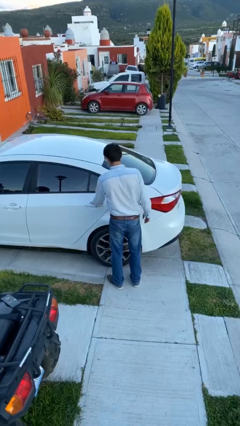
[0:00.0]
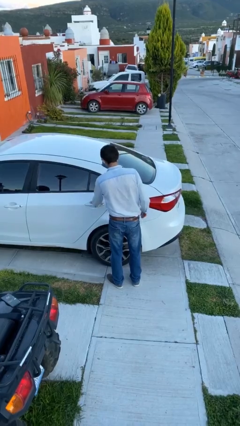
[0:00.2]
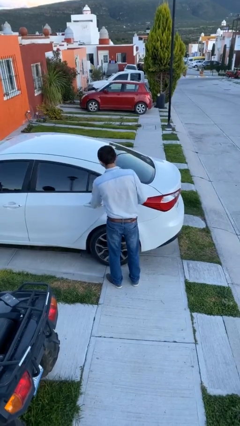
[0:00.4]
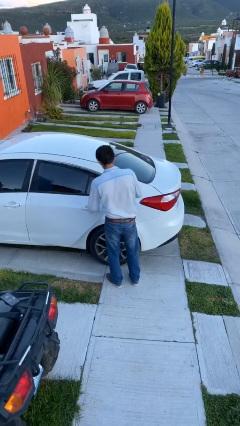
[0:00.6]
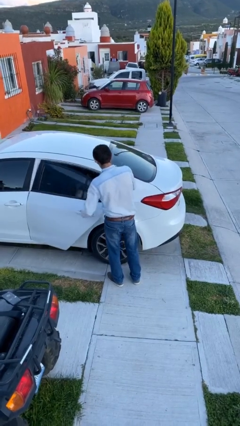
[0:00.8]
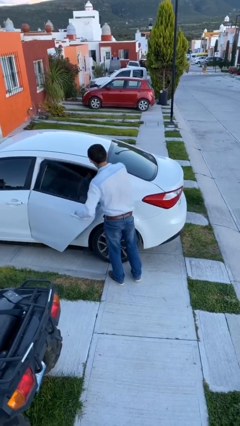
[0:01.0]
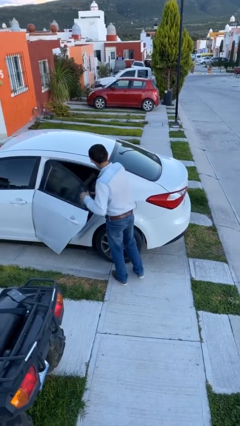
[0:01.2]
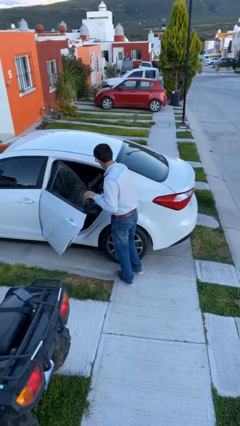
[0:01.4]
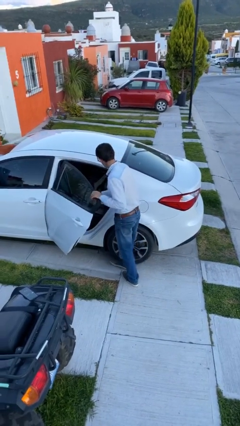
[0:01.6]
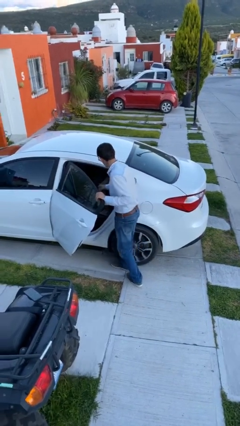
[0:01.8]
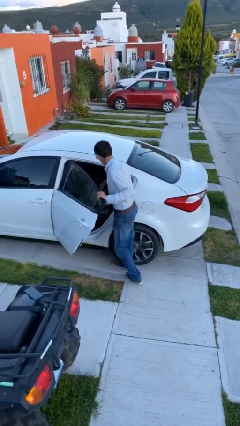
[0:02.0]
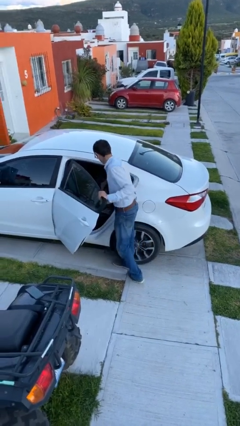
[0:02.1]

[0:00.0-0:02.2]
person opens car door

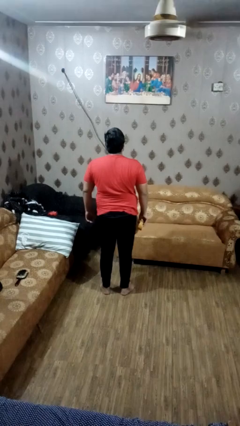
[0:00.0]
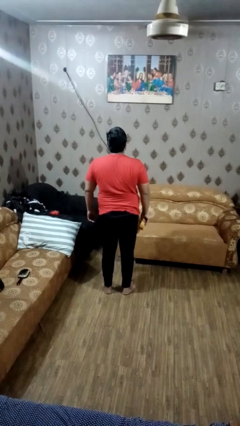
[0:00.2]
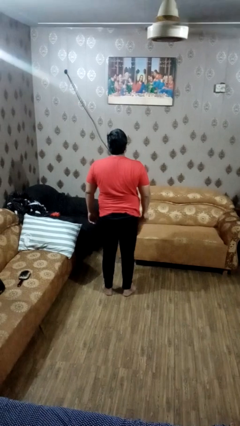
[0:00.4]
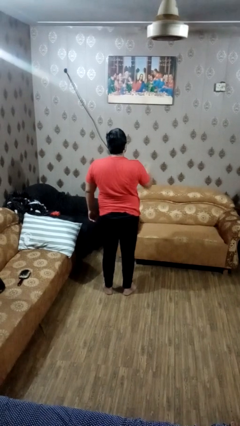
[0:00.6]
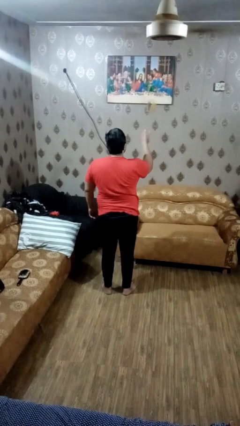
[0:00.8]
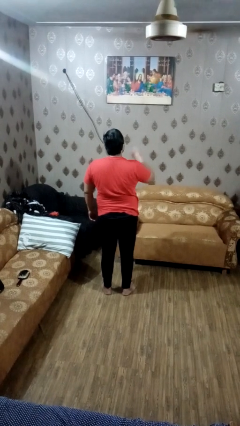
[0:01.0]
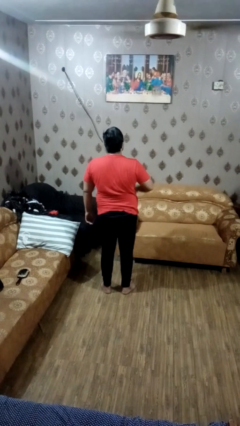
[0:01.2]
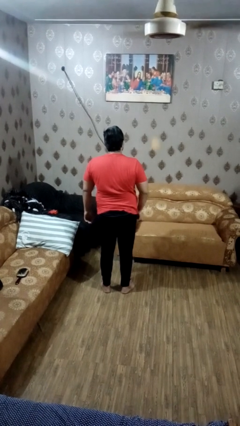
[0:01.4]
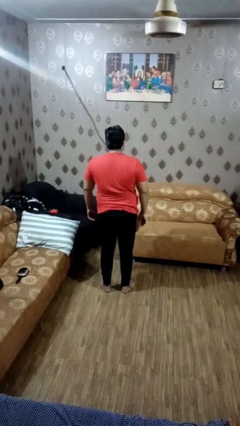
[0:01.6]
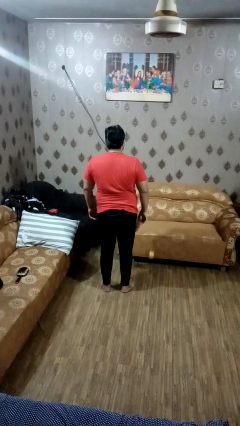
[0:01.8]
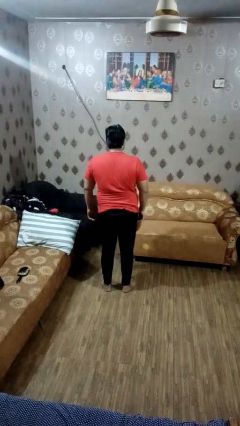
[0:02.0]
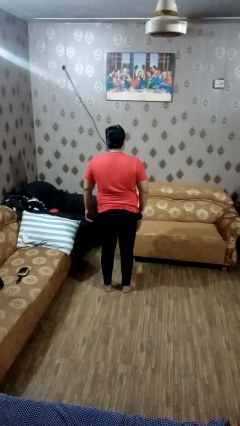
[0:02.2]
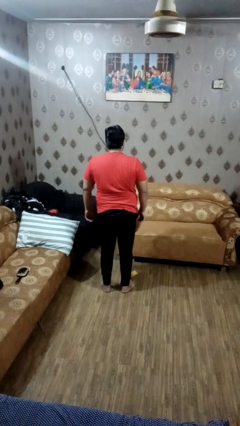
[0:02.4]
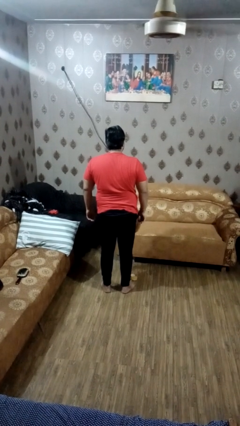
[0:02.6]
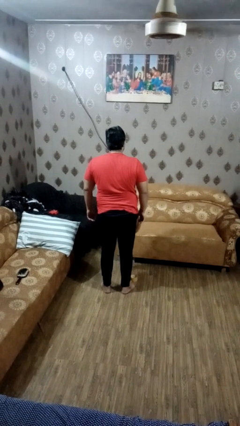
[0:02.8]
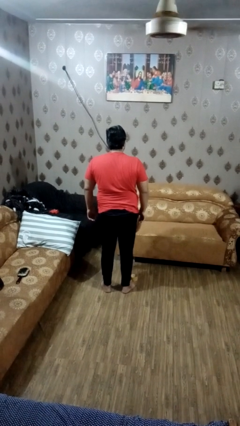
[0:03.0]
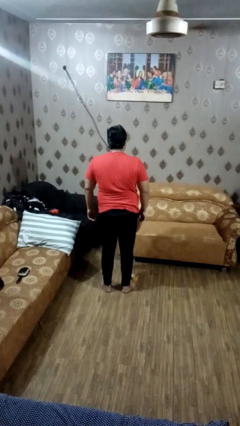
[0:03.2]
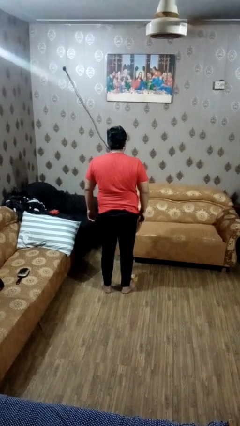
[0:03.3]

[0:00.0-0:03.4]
person throws object into air

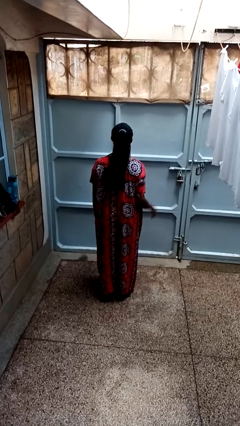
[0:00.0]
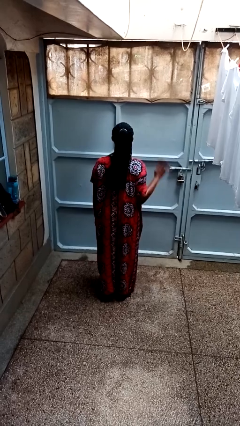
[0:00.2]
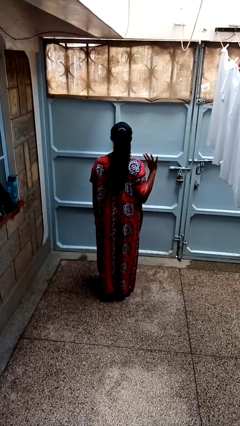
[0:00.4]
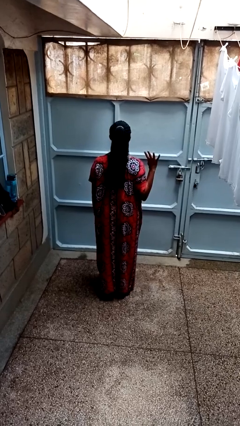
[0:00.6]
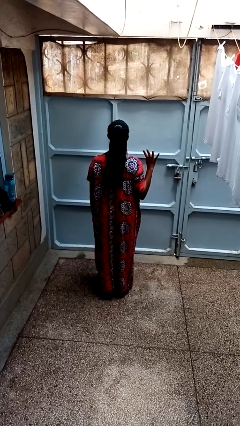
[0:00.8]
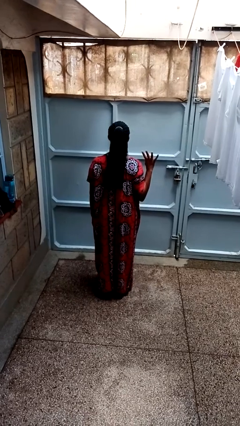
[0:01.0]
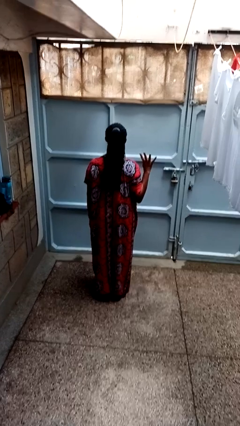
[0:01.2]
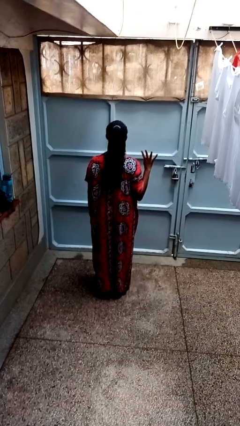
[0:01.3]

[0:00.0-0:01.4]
person gestures number four

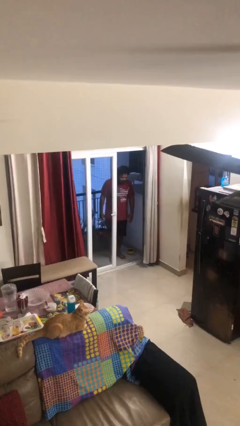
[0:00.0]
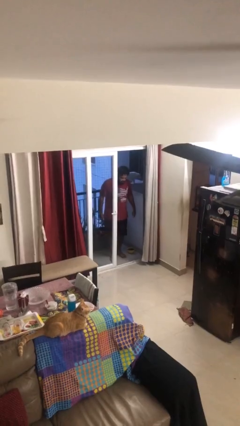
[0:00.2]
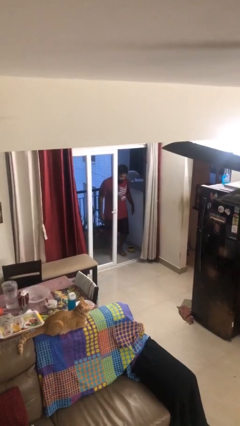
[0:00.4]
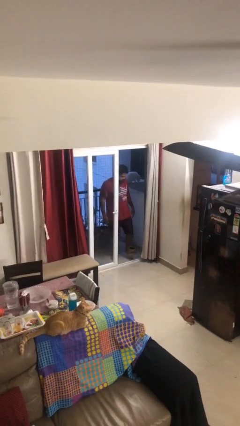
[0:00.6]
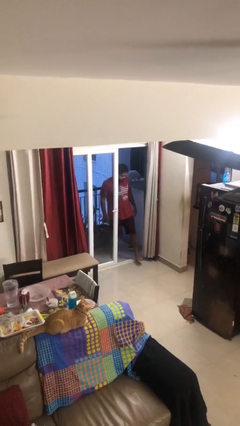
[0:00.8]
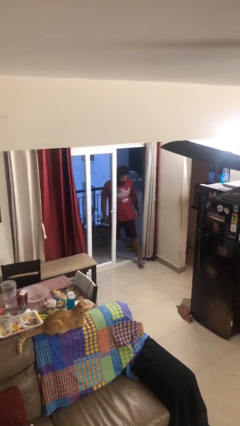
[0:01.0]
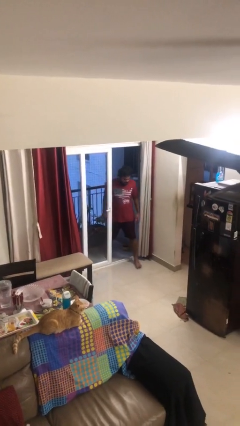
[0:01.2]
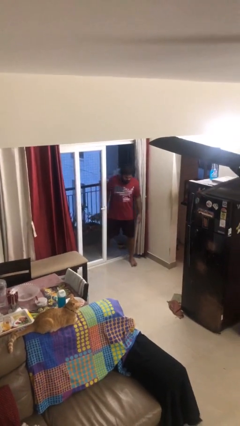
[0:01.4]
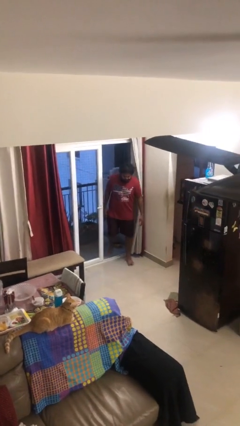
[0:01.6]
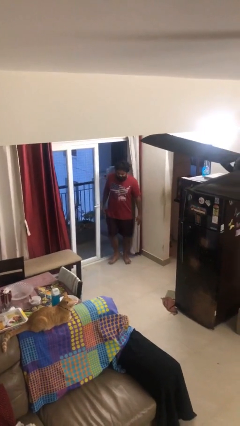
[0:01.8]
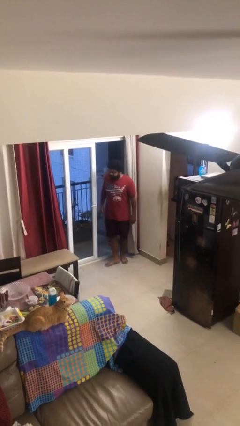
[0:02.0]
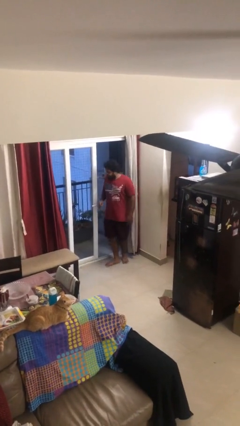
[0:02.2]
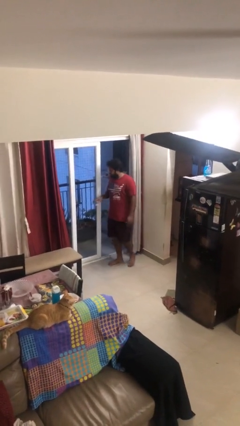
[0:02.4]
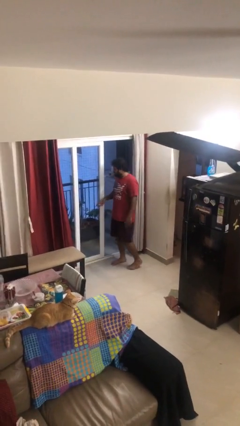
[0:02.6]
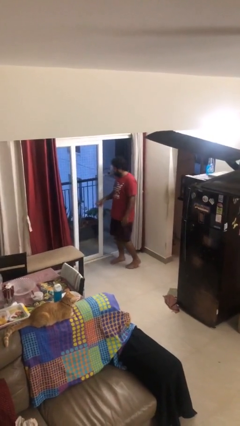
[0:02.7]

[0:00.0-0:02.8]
person enters scene through structure

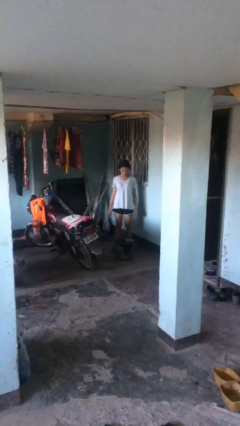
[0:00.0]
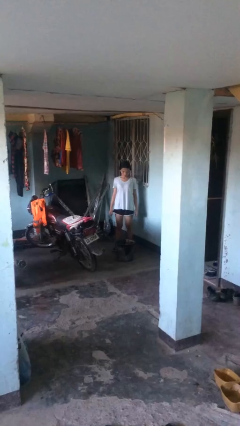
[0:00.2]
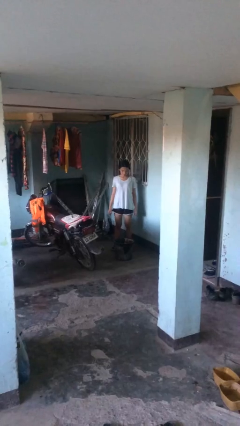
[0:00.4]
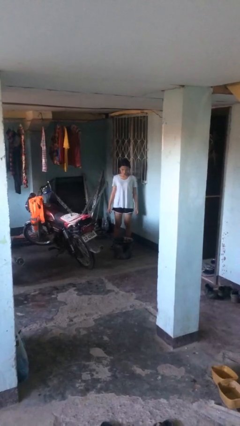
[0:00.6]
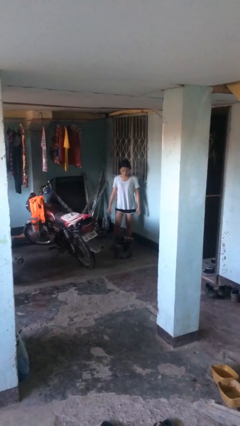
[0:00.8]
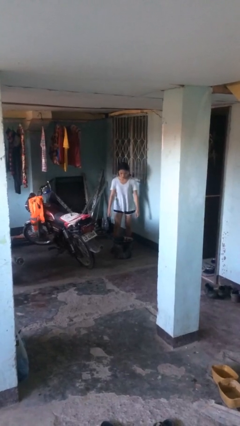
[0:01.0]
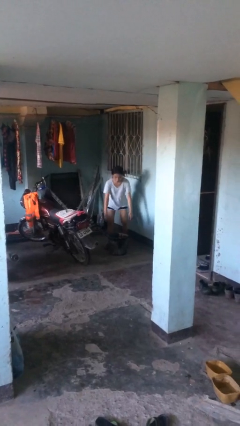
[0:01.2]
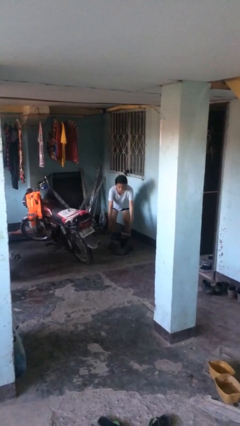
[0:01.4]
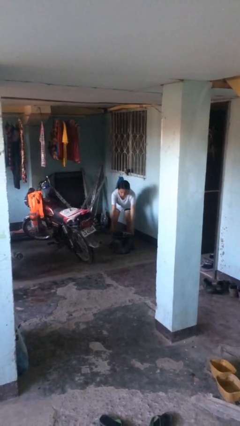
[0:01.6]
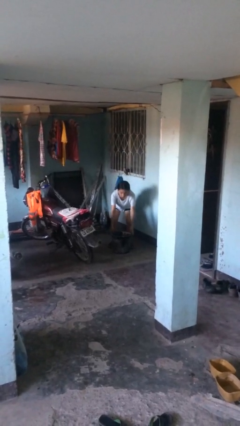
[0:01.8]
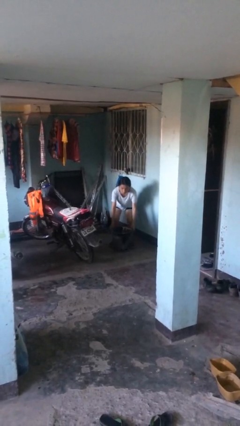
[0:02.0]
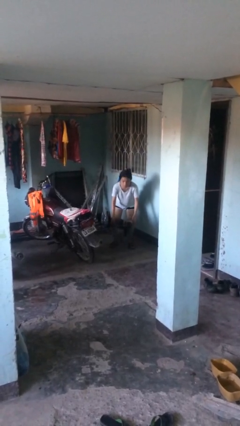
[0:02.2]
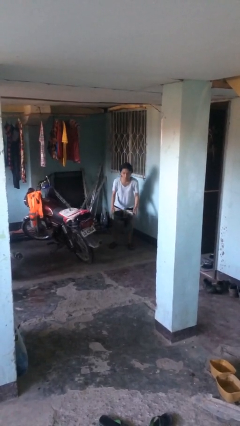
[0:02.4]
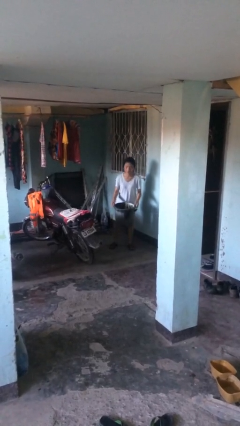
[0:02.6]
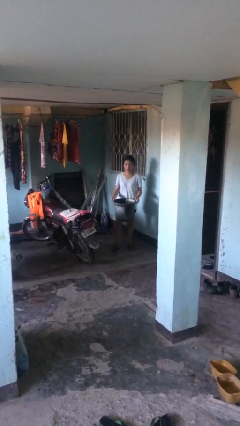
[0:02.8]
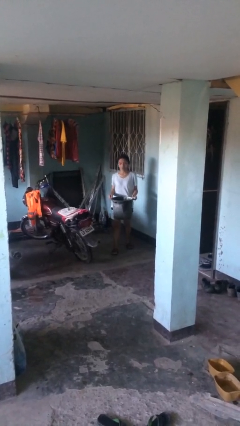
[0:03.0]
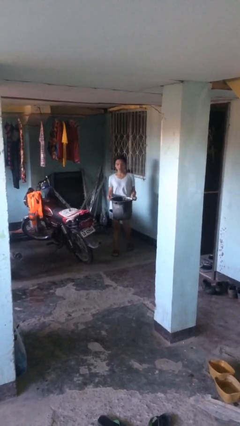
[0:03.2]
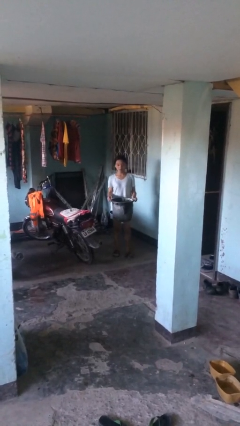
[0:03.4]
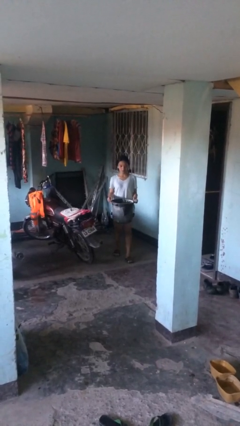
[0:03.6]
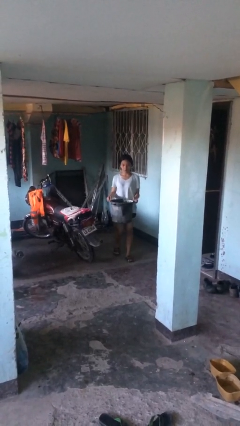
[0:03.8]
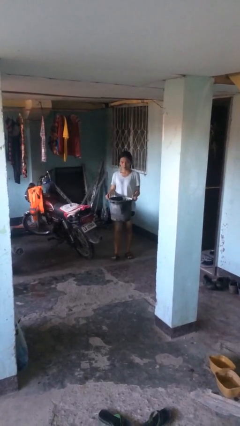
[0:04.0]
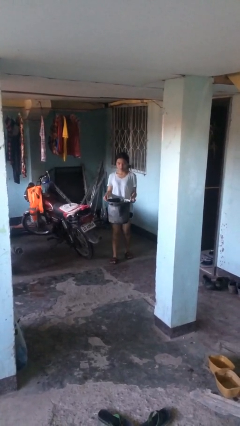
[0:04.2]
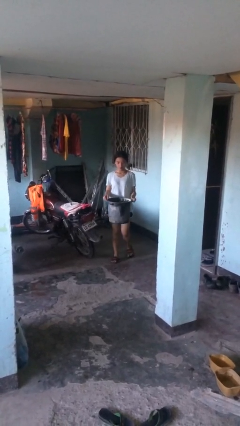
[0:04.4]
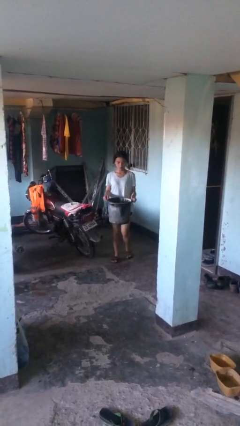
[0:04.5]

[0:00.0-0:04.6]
person picks up object from floor

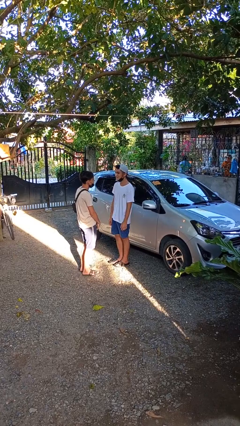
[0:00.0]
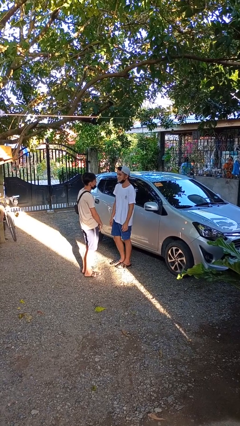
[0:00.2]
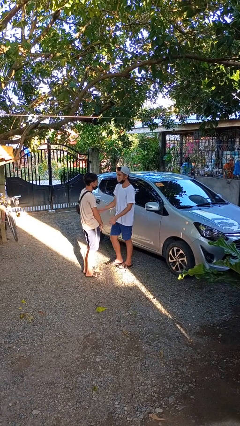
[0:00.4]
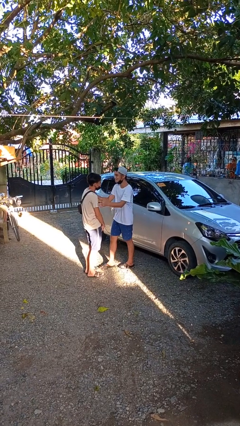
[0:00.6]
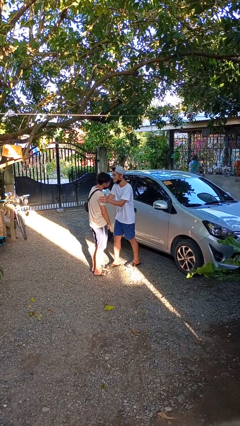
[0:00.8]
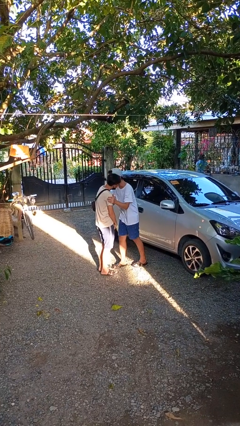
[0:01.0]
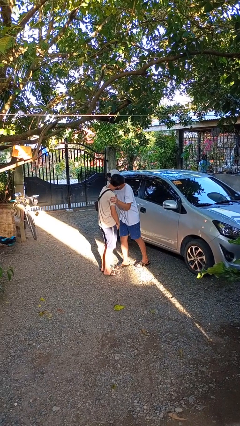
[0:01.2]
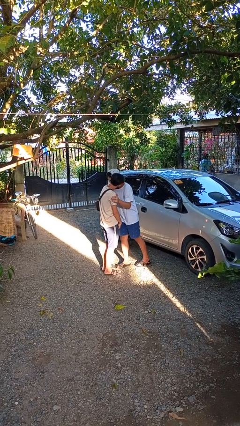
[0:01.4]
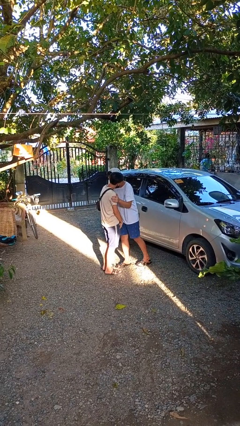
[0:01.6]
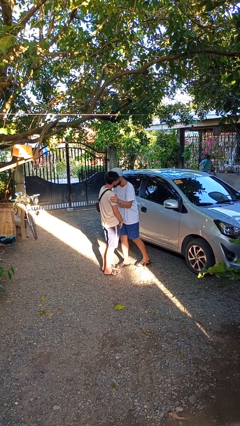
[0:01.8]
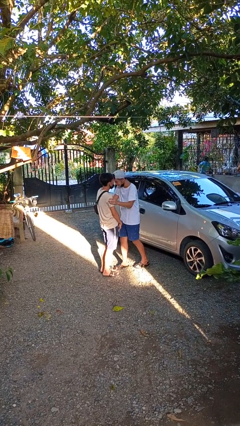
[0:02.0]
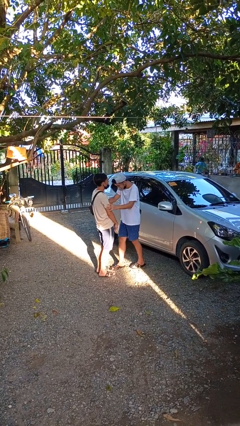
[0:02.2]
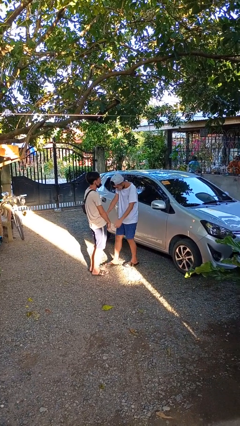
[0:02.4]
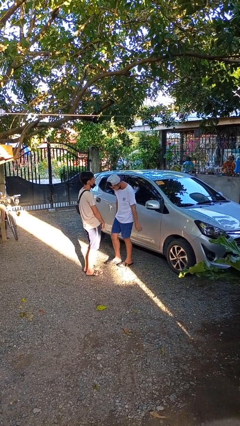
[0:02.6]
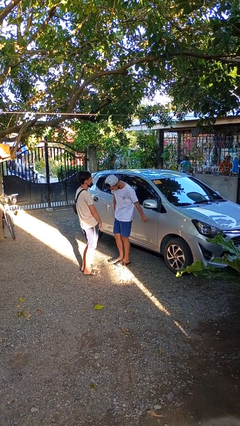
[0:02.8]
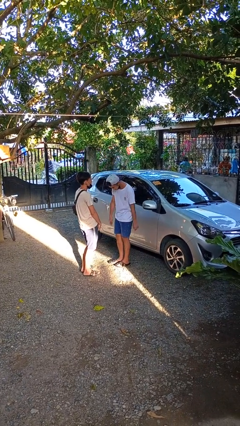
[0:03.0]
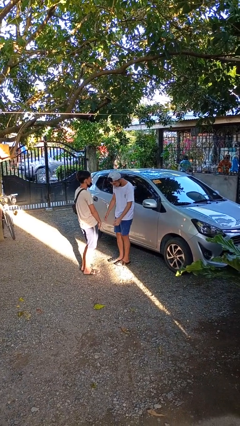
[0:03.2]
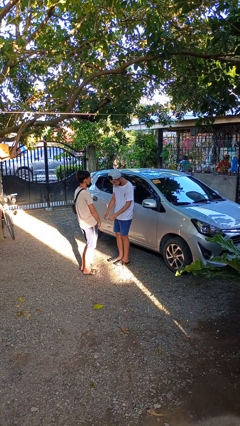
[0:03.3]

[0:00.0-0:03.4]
person kisses cheek of person
